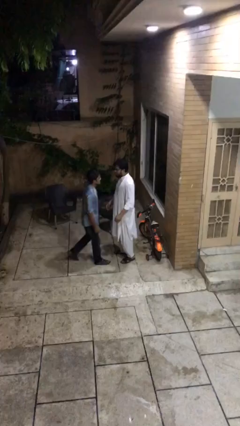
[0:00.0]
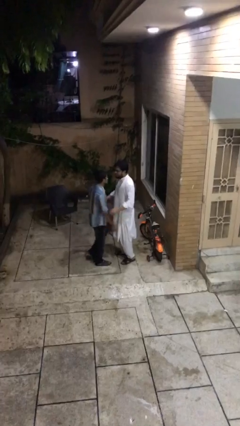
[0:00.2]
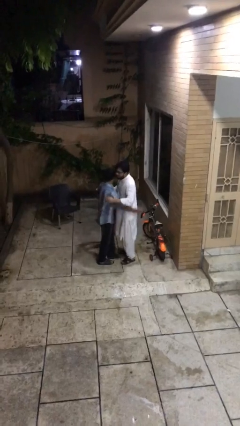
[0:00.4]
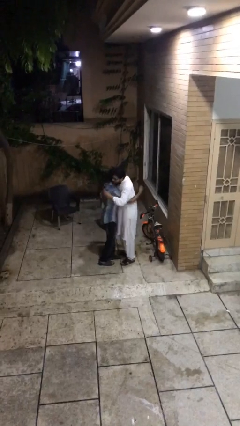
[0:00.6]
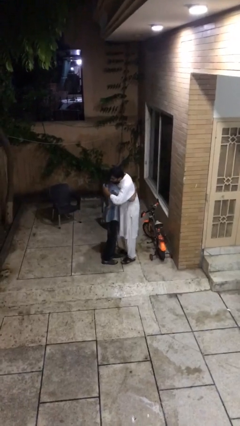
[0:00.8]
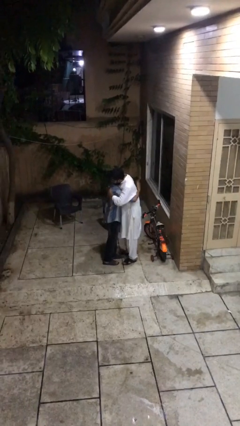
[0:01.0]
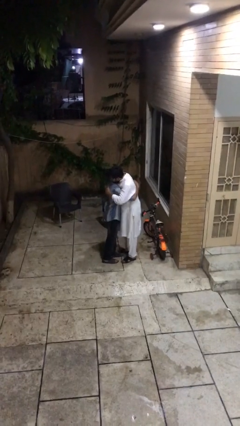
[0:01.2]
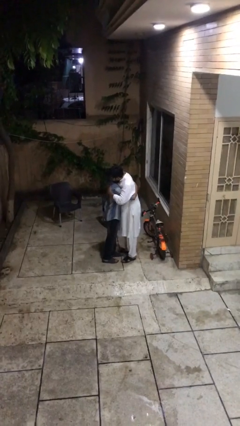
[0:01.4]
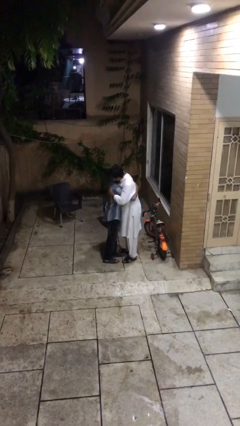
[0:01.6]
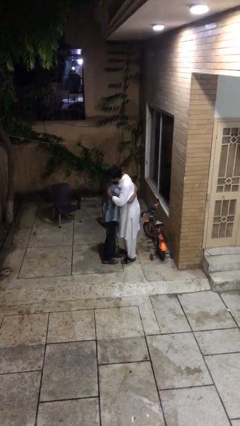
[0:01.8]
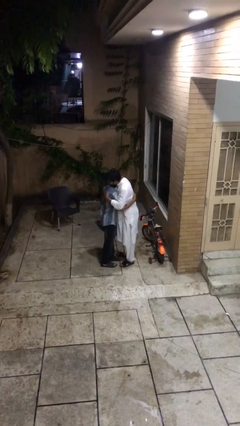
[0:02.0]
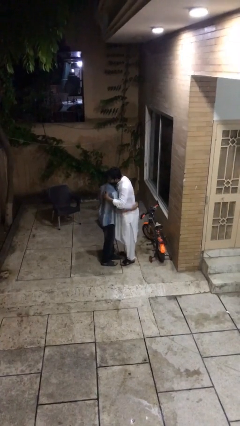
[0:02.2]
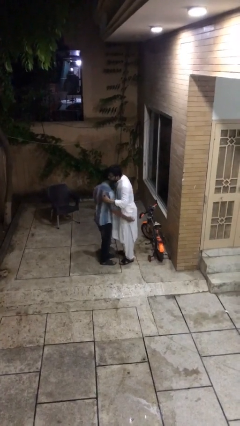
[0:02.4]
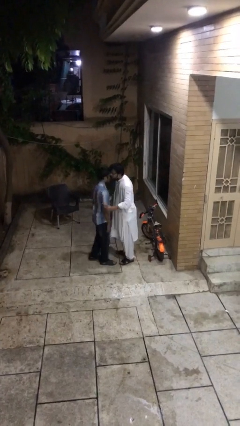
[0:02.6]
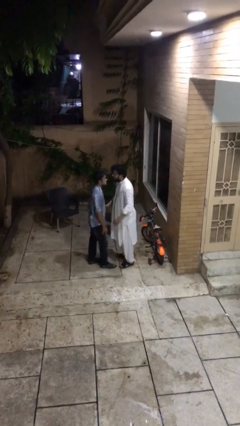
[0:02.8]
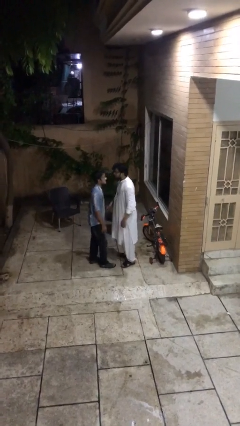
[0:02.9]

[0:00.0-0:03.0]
person embraces person

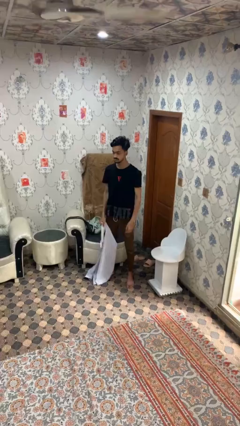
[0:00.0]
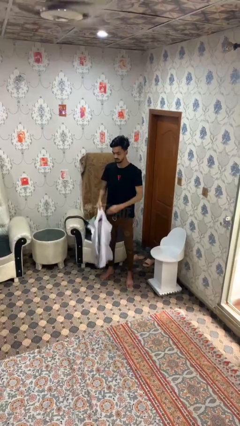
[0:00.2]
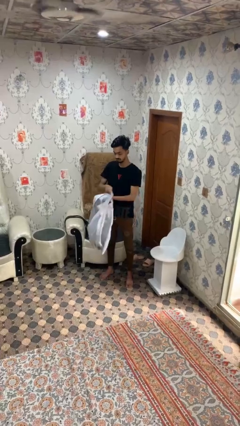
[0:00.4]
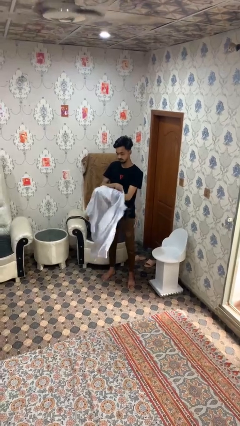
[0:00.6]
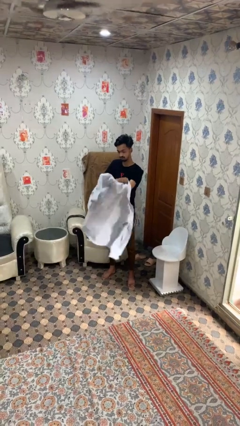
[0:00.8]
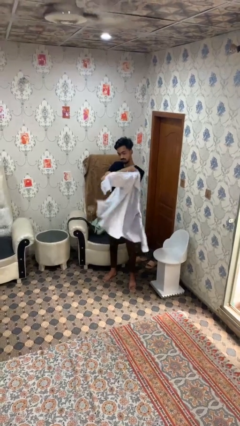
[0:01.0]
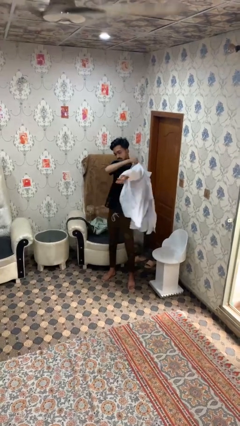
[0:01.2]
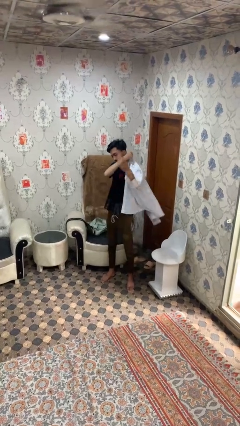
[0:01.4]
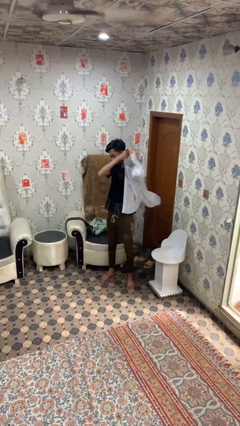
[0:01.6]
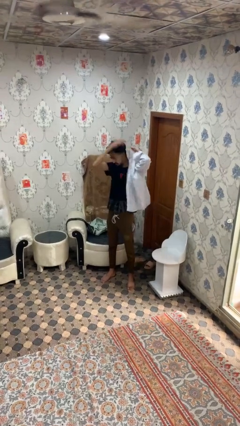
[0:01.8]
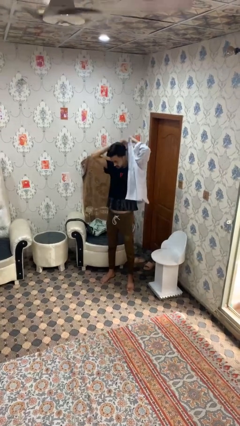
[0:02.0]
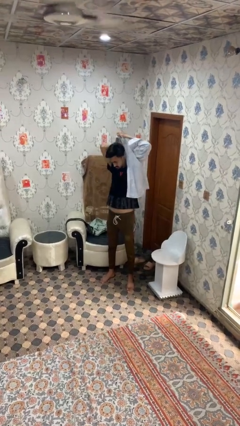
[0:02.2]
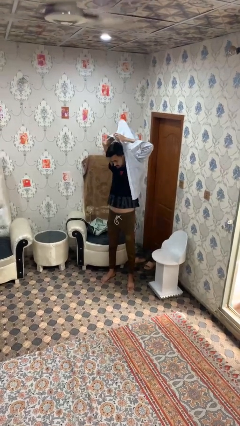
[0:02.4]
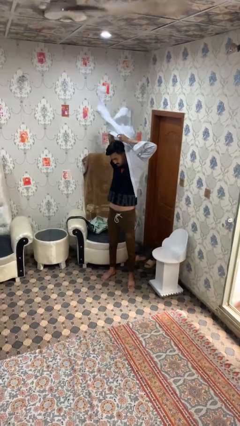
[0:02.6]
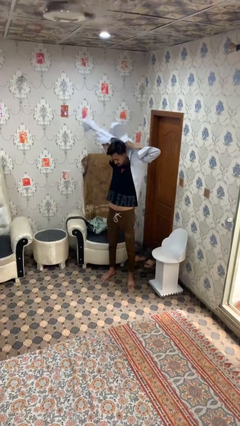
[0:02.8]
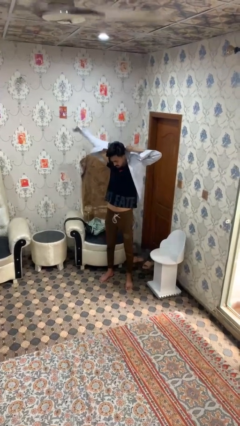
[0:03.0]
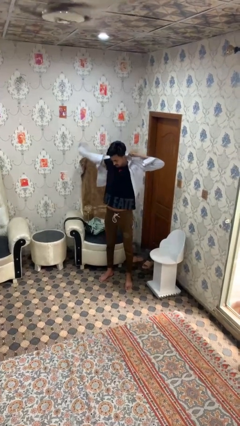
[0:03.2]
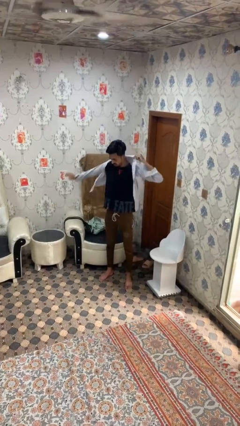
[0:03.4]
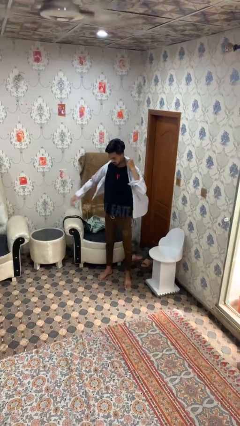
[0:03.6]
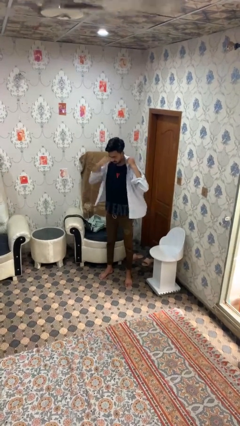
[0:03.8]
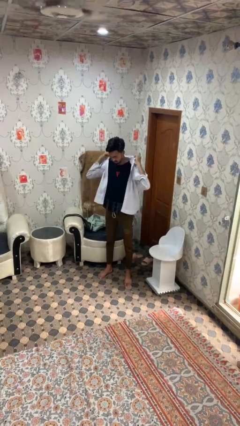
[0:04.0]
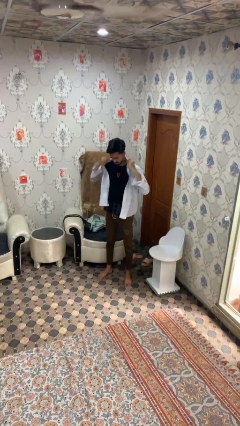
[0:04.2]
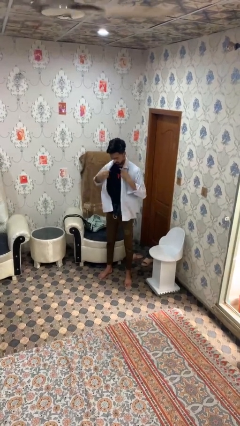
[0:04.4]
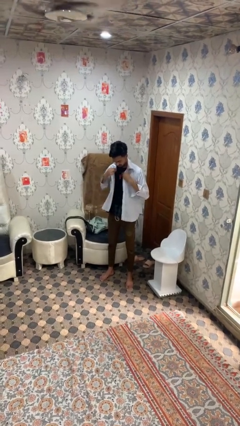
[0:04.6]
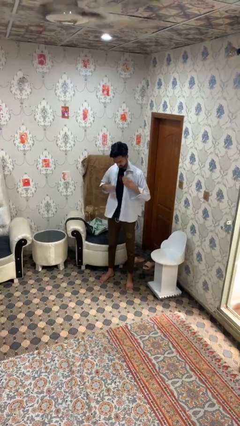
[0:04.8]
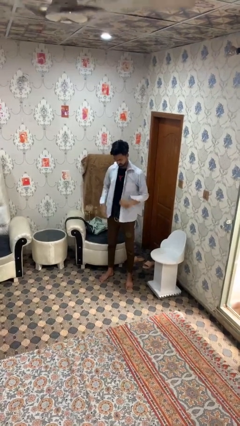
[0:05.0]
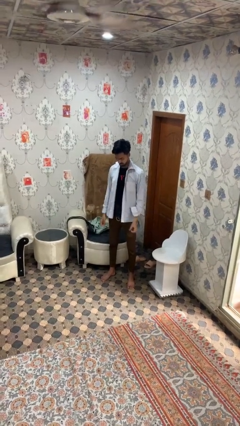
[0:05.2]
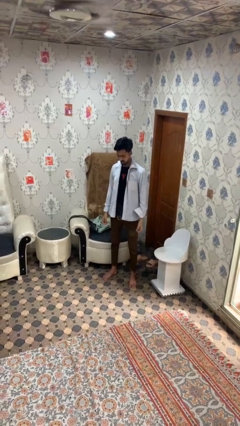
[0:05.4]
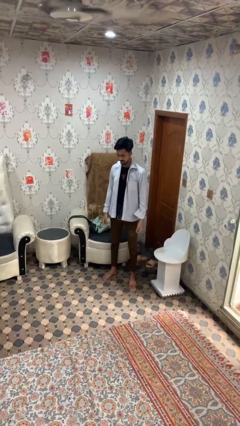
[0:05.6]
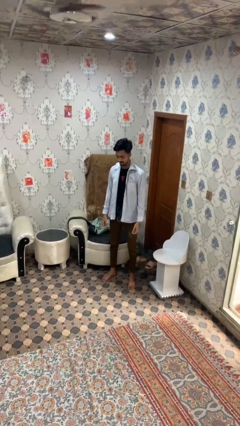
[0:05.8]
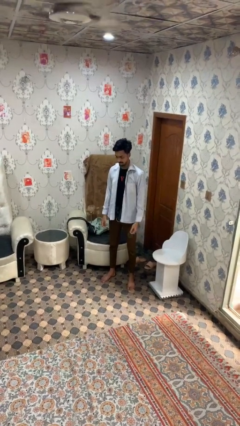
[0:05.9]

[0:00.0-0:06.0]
person puts on shirt

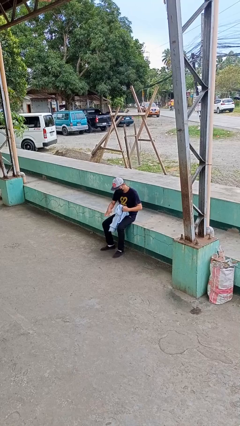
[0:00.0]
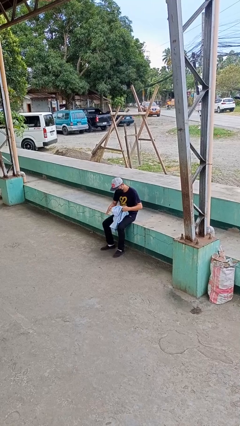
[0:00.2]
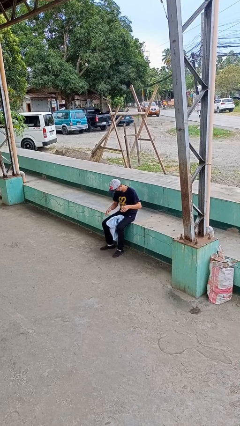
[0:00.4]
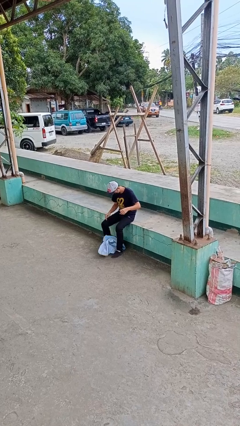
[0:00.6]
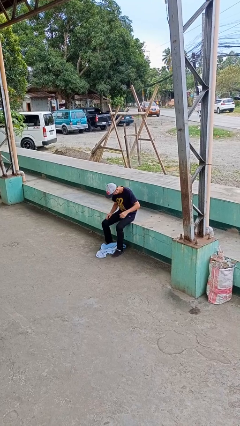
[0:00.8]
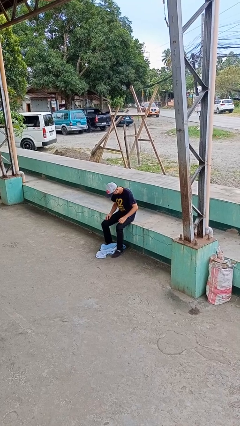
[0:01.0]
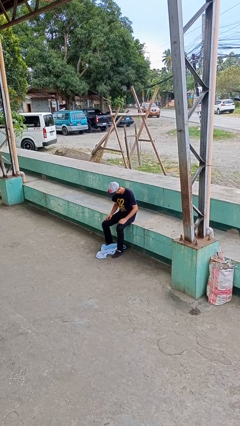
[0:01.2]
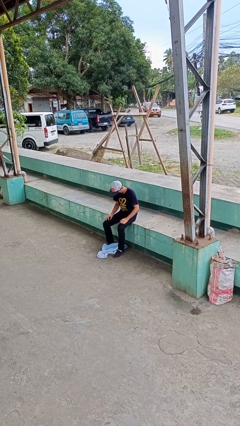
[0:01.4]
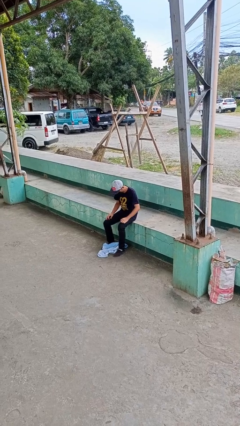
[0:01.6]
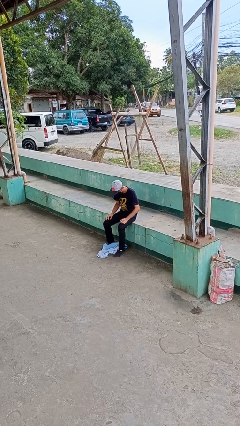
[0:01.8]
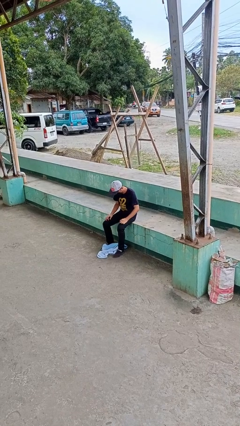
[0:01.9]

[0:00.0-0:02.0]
person drops object

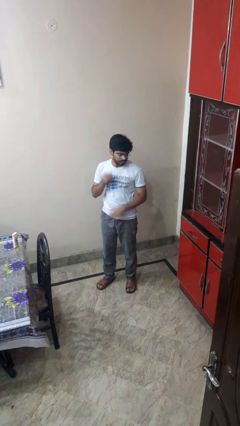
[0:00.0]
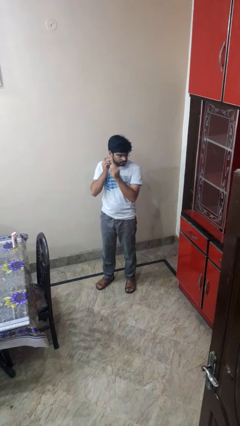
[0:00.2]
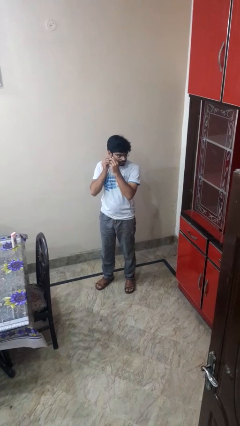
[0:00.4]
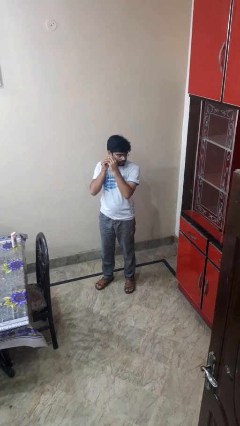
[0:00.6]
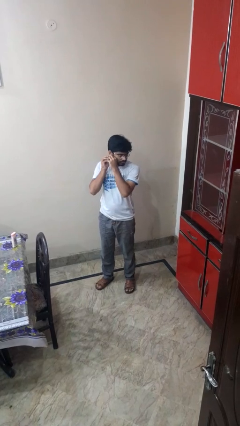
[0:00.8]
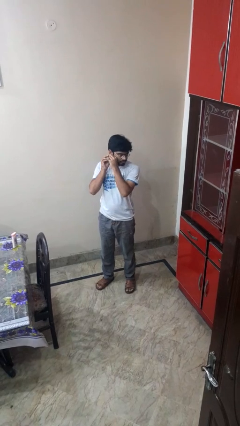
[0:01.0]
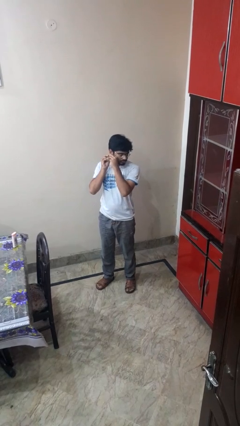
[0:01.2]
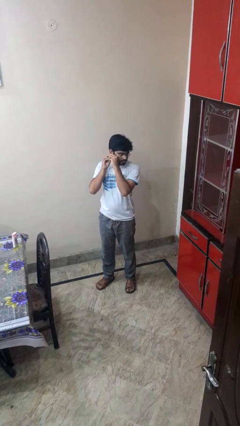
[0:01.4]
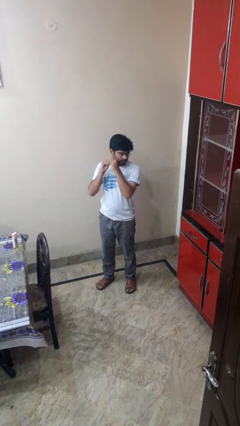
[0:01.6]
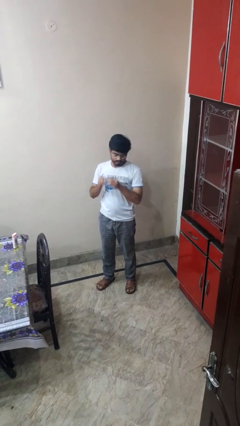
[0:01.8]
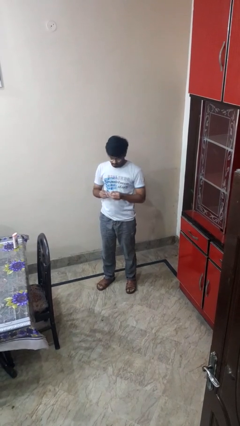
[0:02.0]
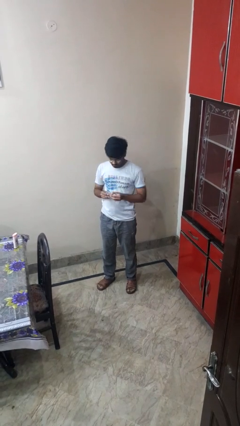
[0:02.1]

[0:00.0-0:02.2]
person takes off earrings

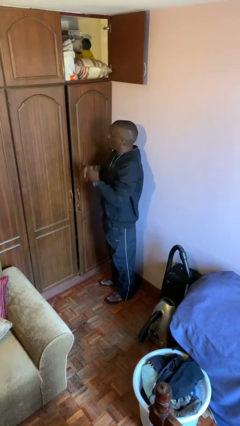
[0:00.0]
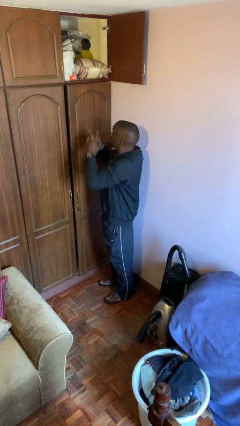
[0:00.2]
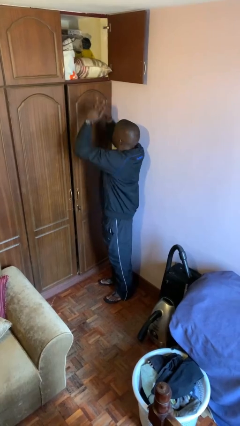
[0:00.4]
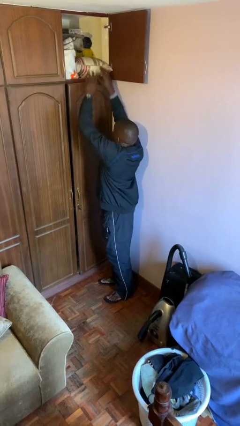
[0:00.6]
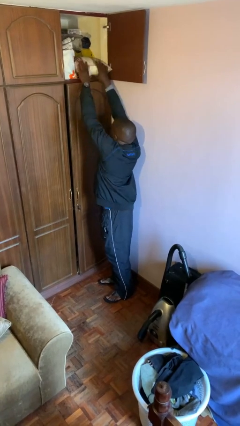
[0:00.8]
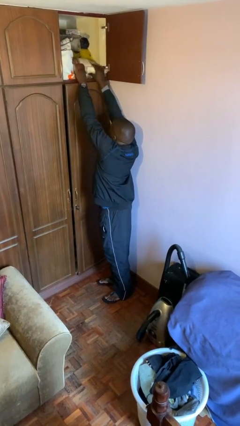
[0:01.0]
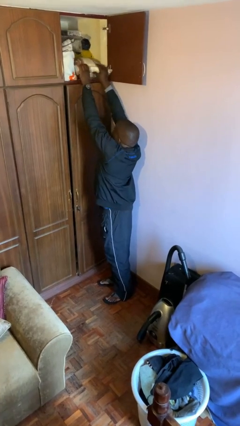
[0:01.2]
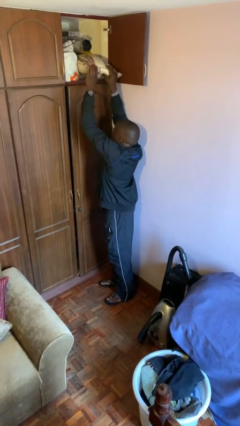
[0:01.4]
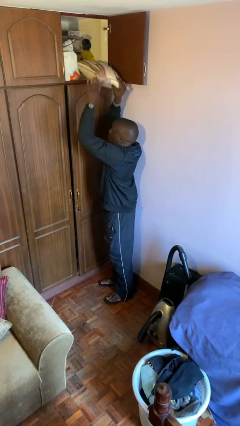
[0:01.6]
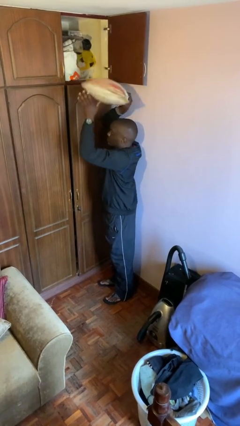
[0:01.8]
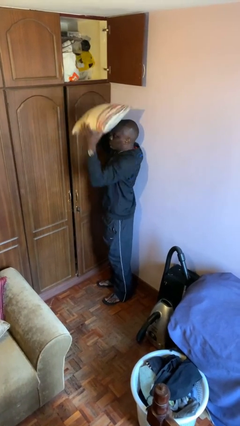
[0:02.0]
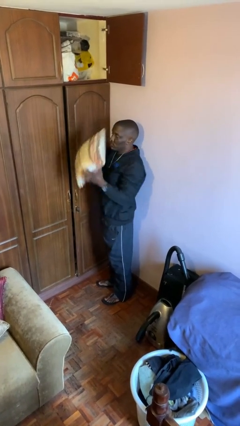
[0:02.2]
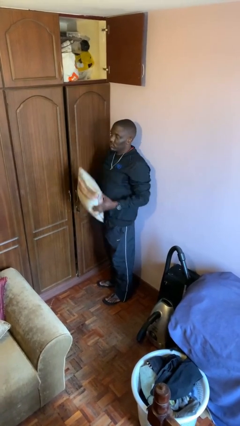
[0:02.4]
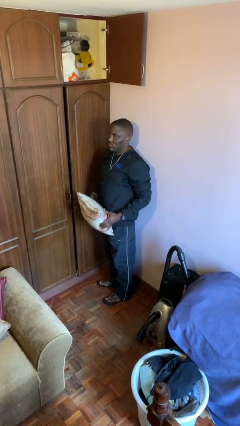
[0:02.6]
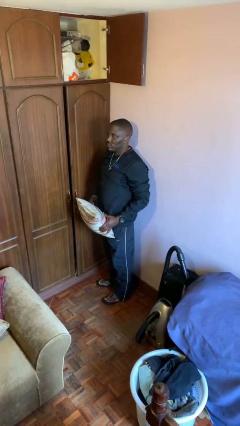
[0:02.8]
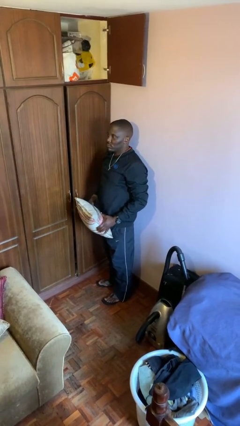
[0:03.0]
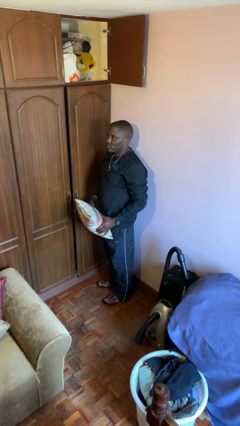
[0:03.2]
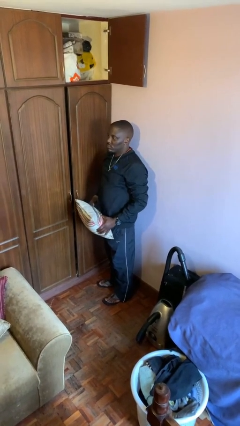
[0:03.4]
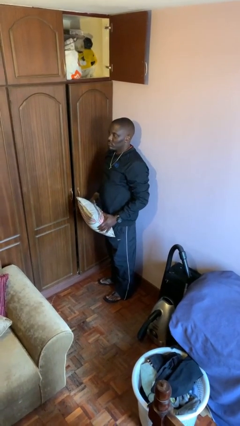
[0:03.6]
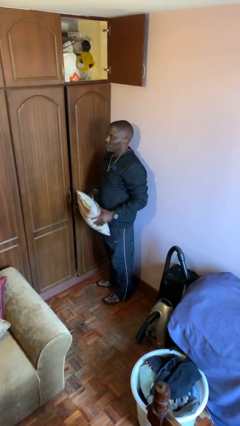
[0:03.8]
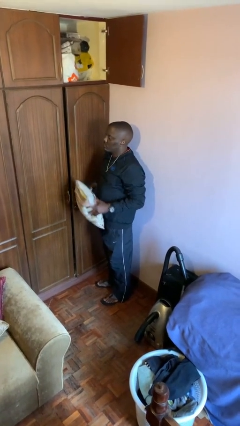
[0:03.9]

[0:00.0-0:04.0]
person picks up object from shelf

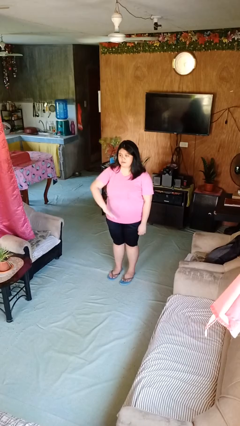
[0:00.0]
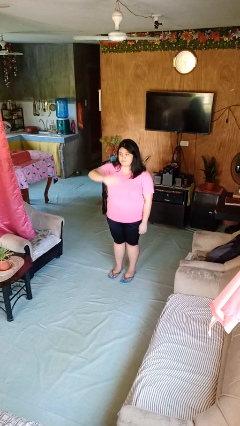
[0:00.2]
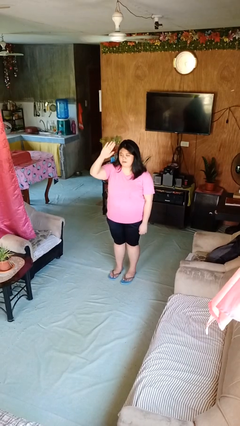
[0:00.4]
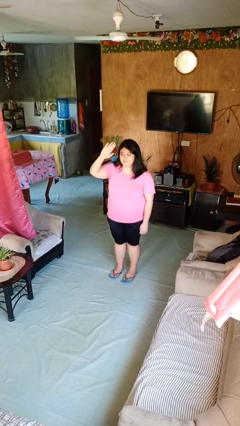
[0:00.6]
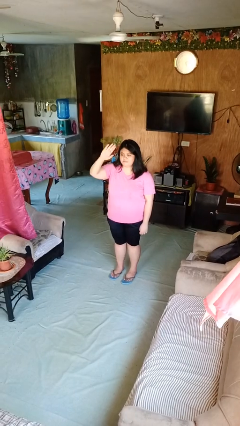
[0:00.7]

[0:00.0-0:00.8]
person gestures swipe up
